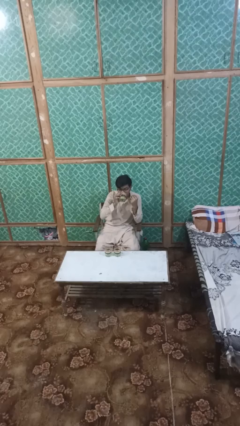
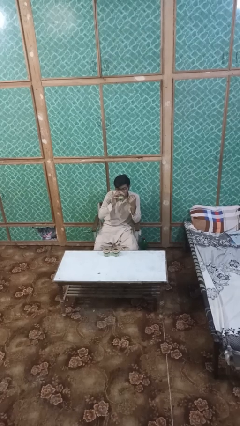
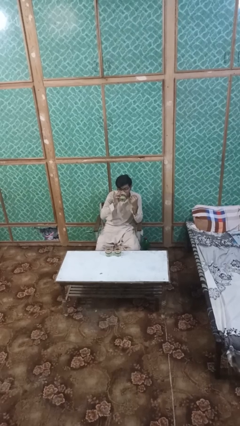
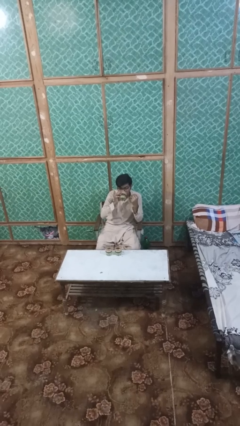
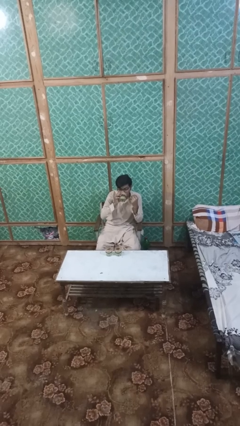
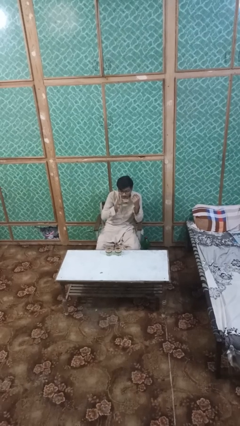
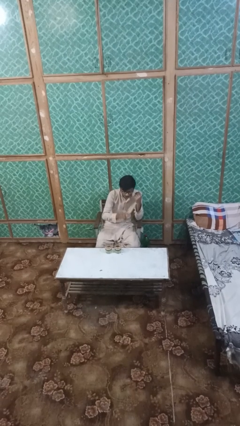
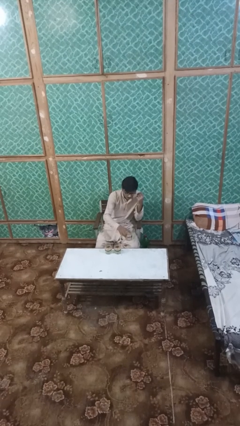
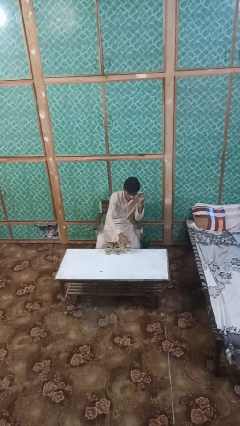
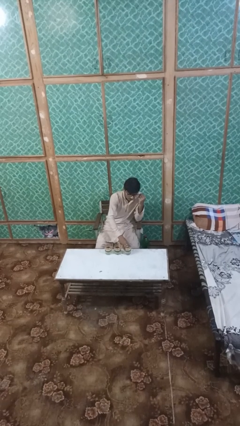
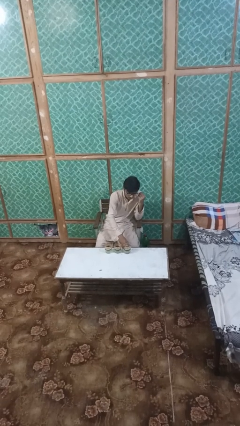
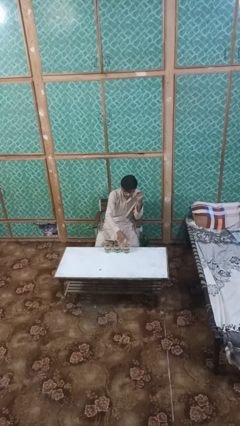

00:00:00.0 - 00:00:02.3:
person puts down object on table

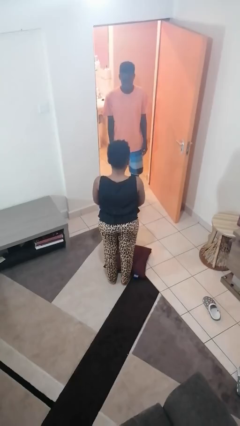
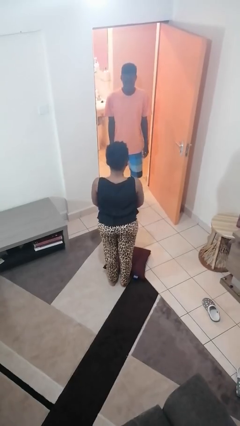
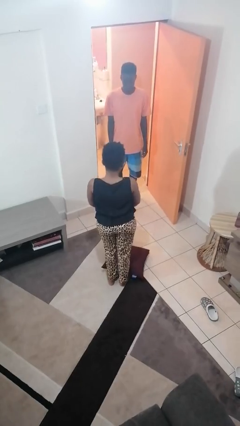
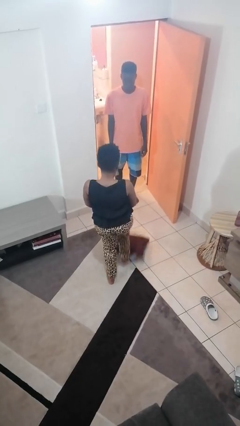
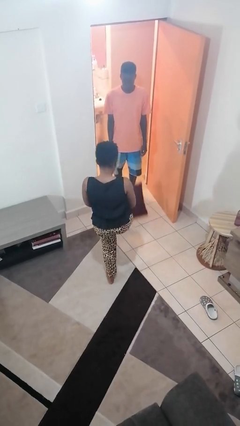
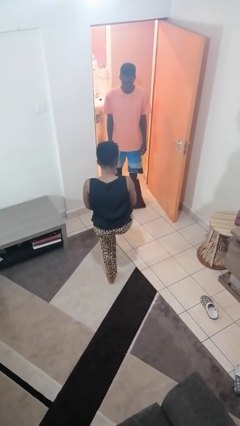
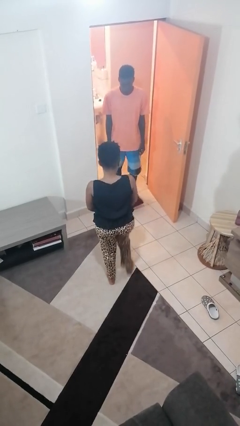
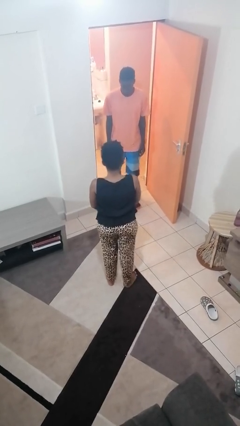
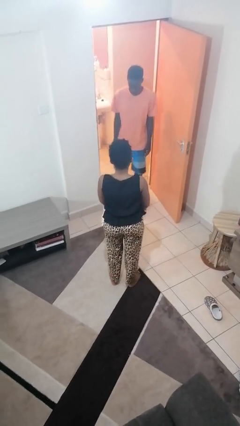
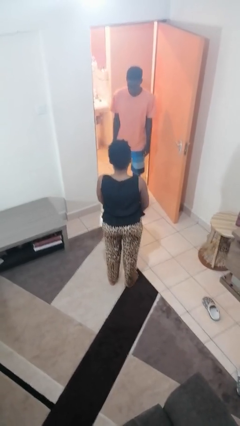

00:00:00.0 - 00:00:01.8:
person kicks object to person

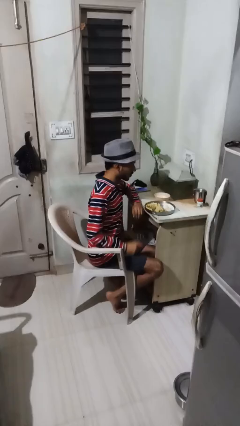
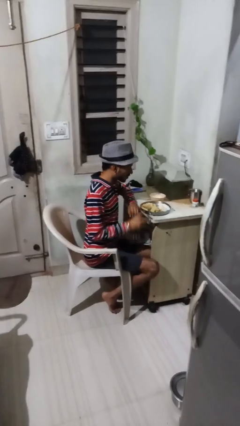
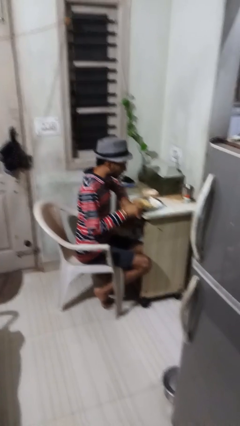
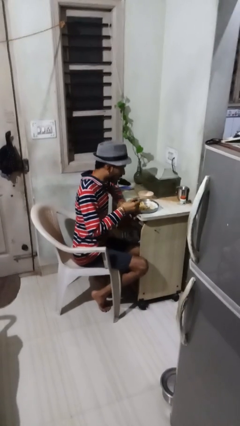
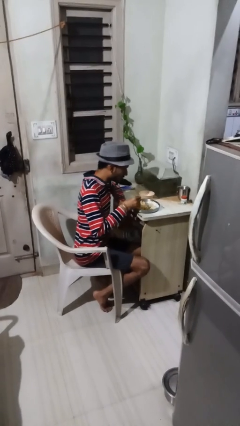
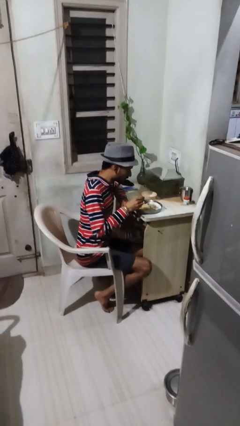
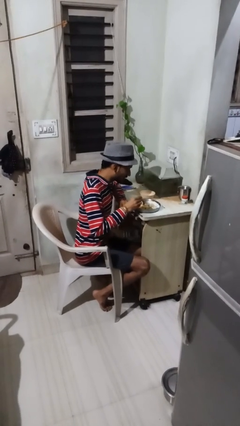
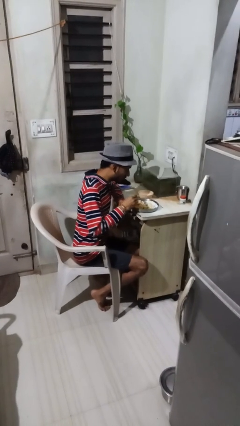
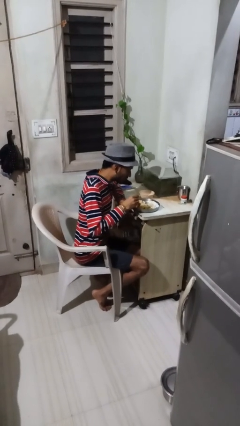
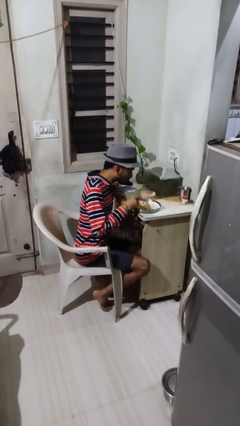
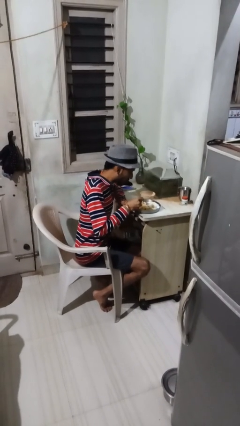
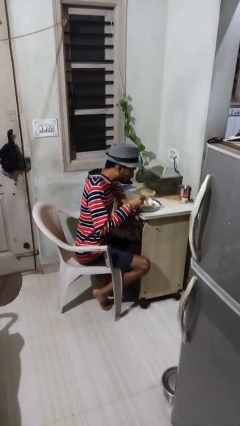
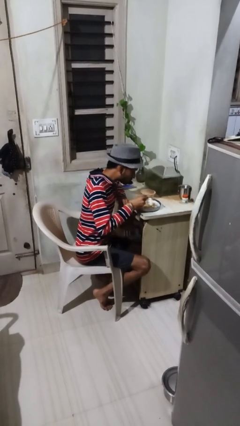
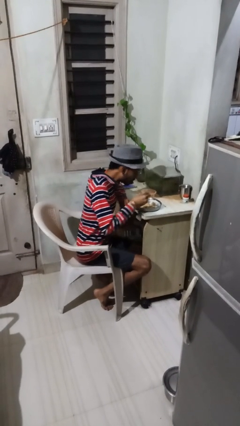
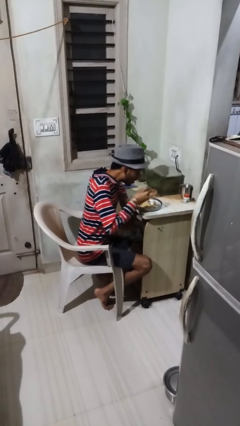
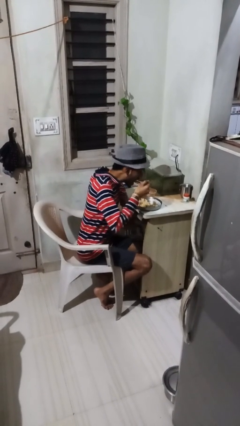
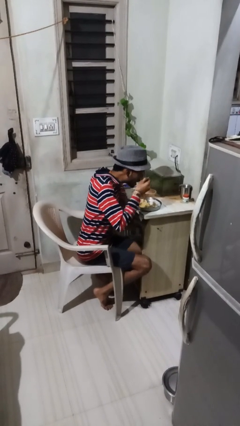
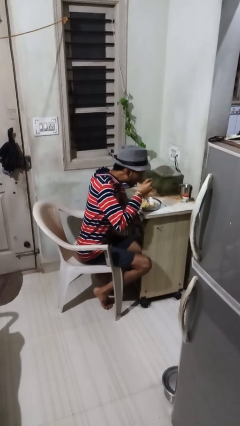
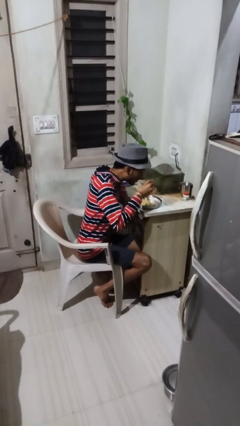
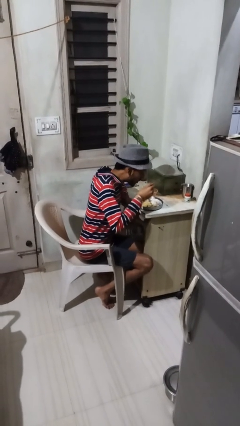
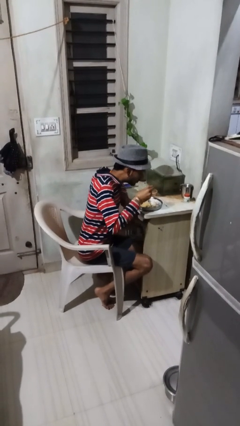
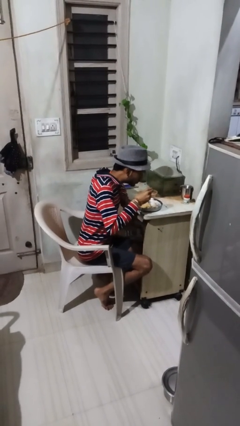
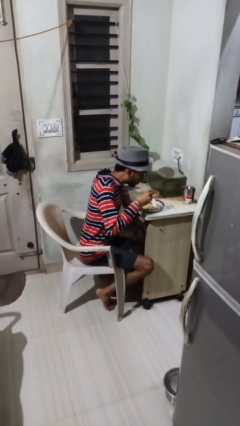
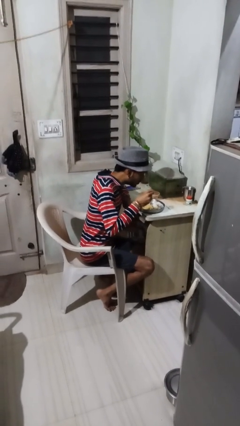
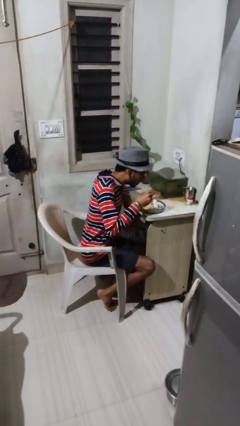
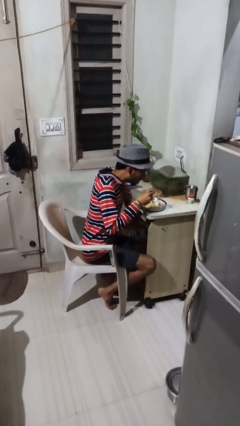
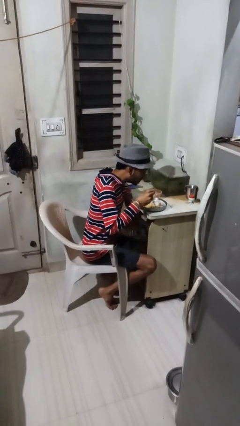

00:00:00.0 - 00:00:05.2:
person eats with utensil

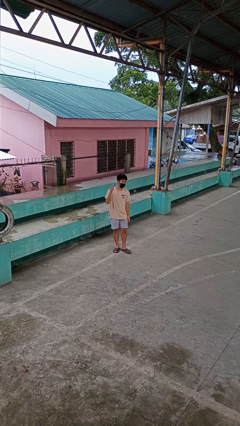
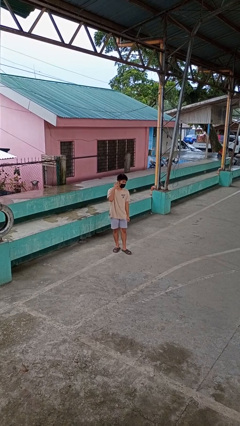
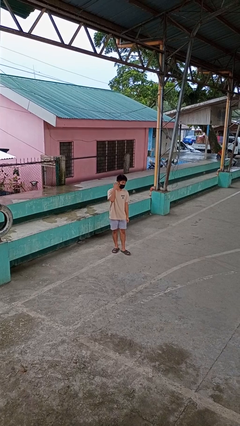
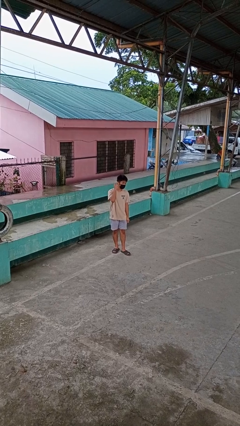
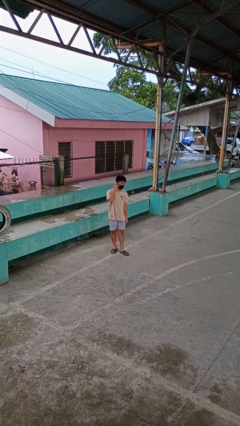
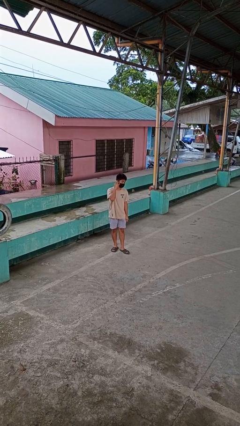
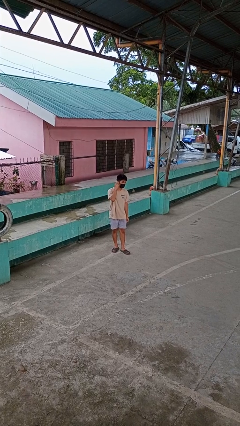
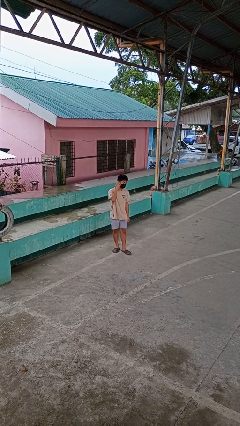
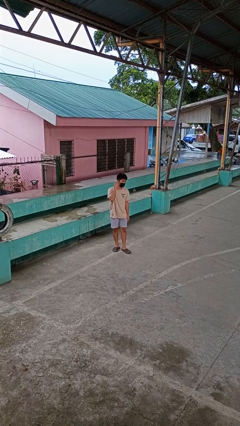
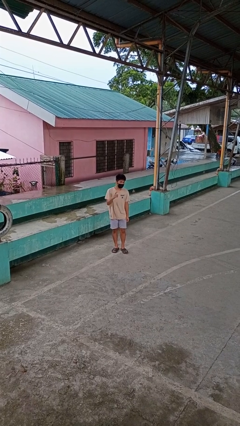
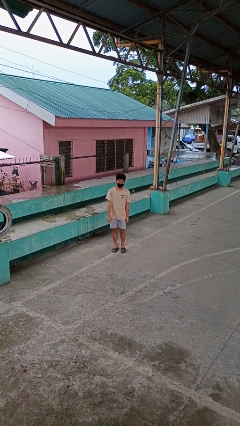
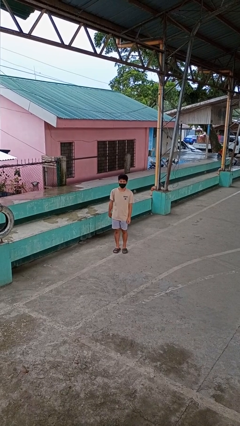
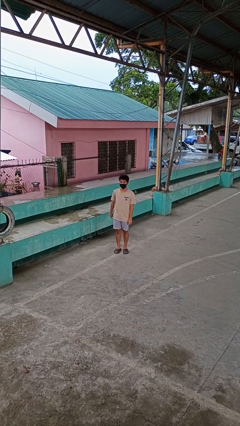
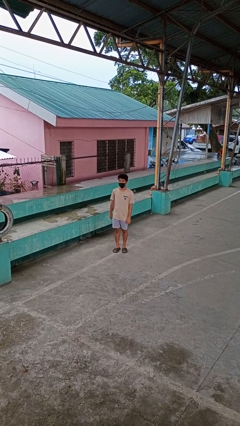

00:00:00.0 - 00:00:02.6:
person gestures listen closely

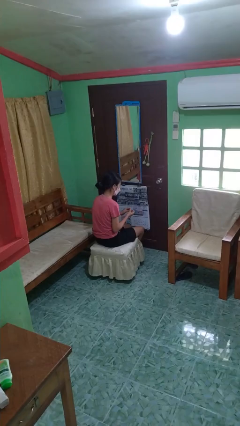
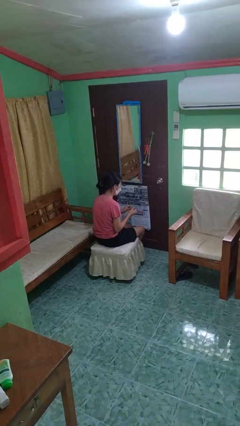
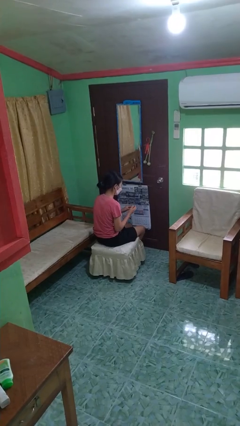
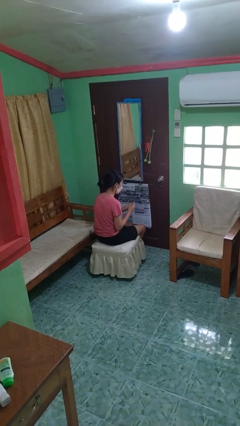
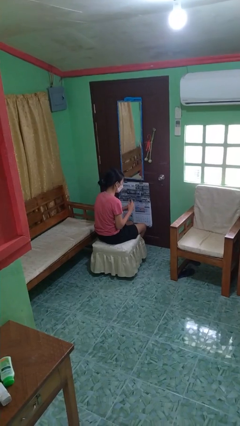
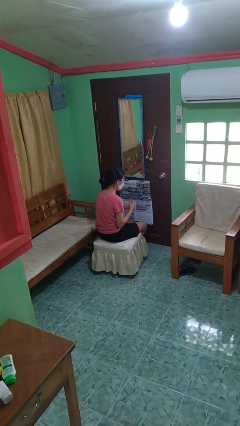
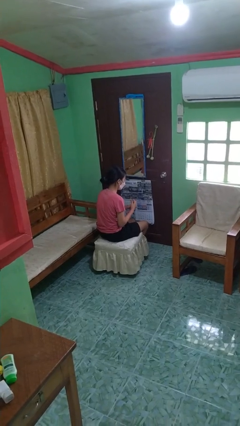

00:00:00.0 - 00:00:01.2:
person puts on ring

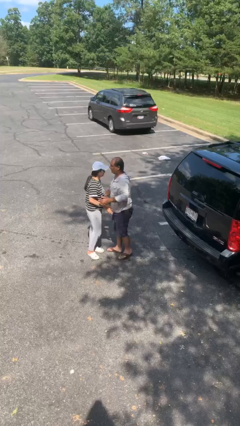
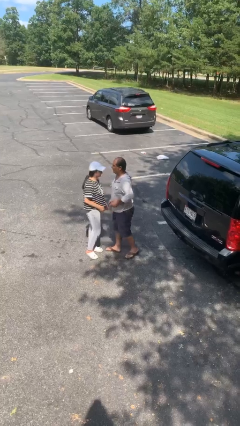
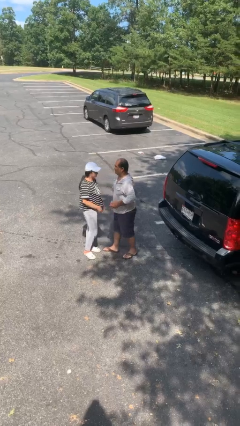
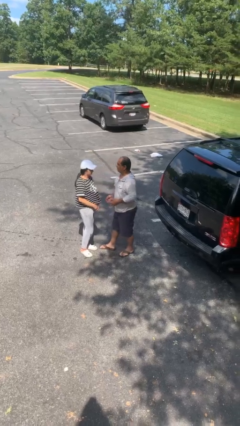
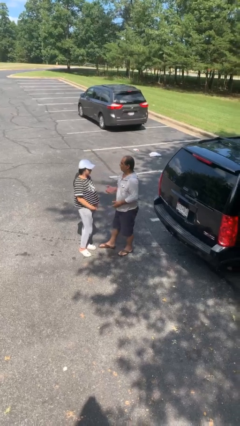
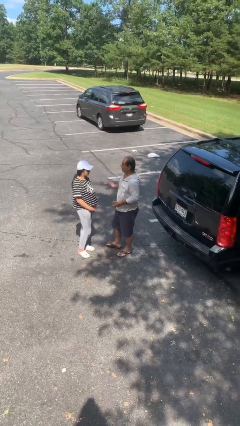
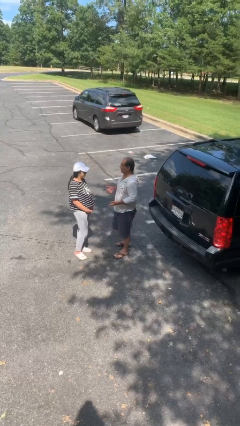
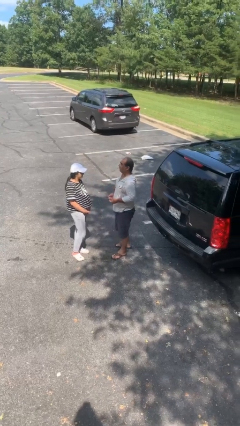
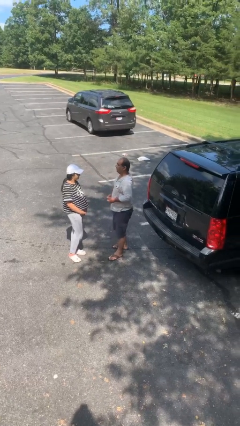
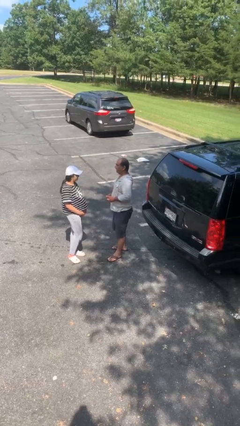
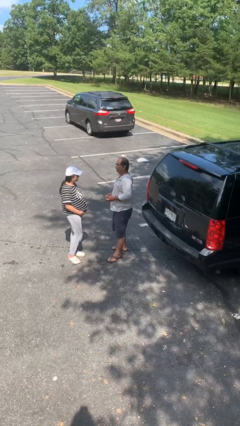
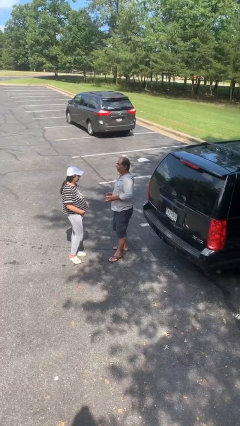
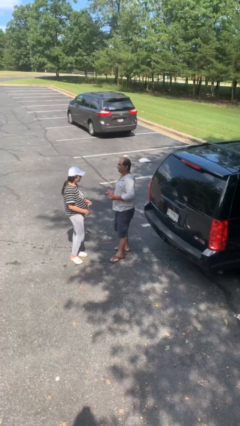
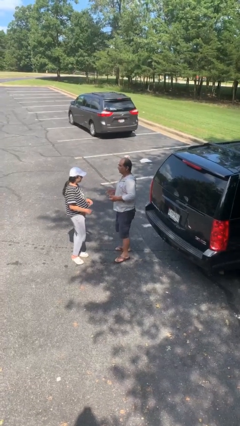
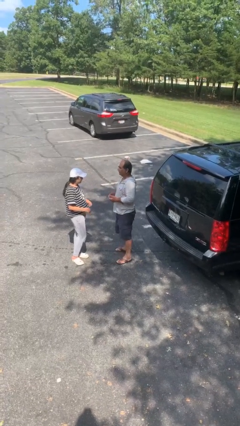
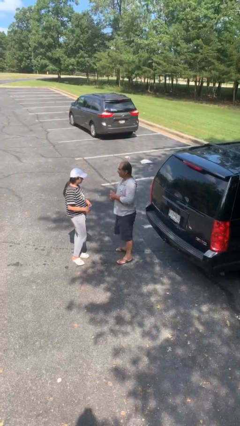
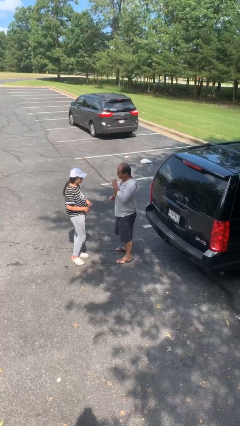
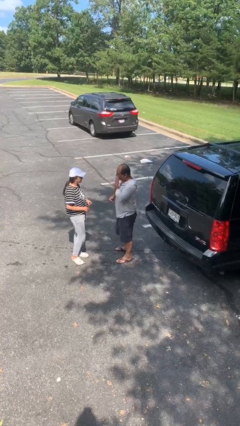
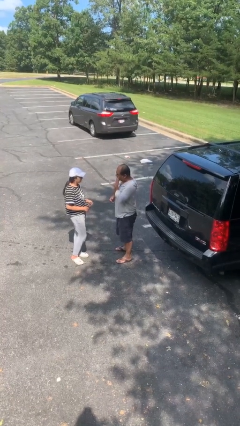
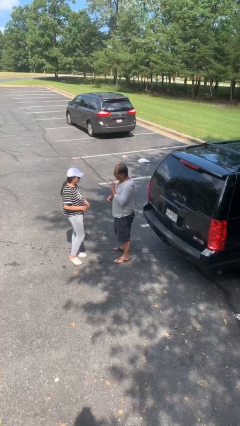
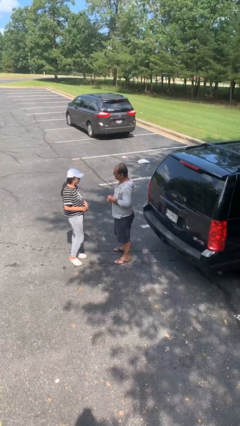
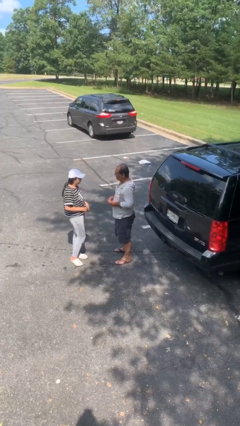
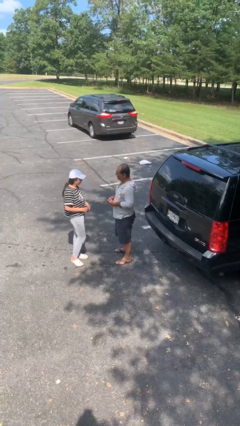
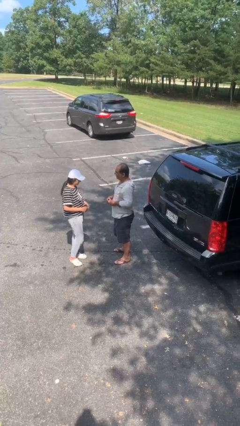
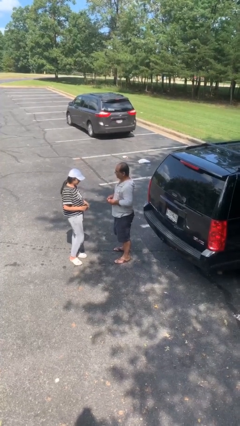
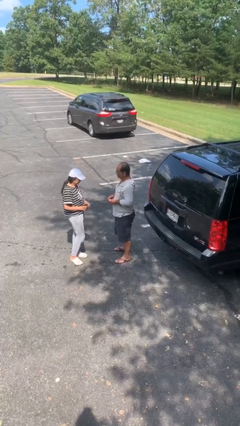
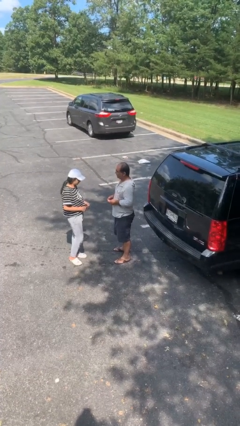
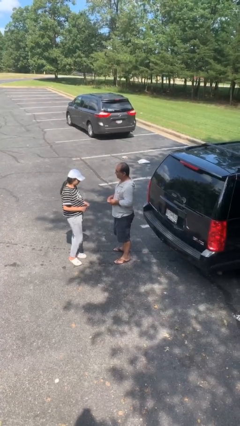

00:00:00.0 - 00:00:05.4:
person talks to person
